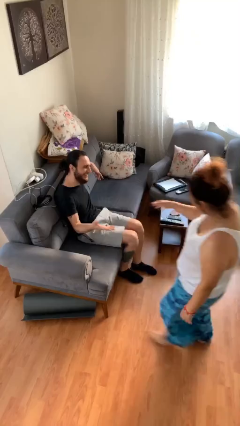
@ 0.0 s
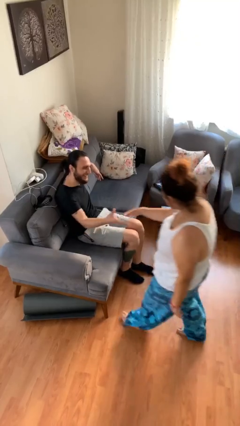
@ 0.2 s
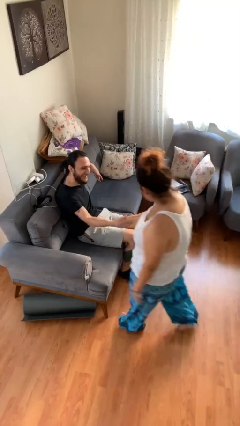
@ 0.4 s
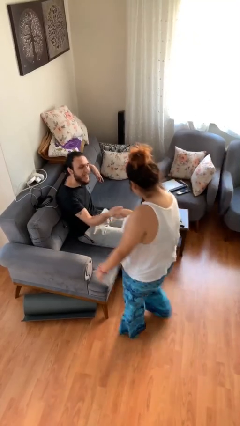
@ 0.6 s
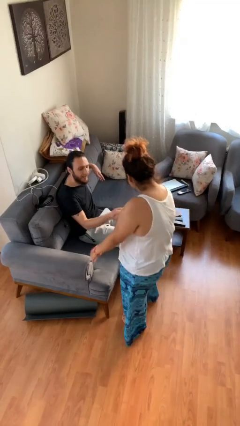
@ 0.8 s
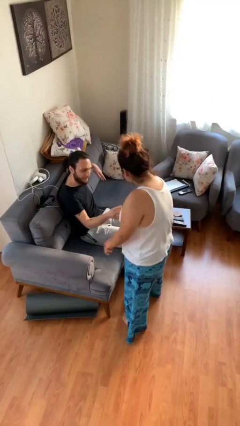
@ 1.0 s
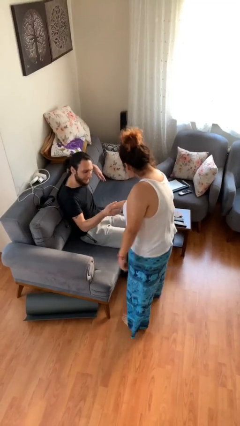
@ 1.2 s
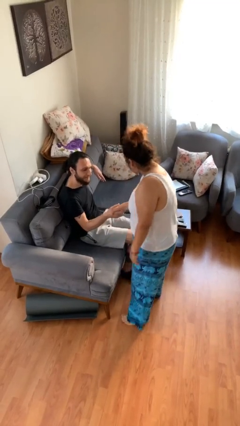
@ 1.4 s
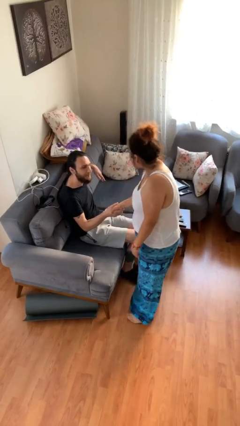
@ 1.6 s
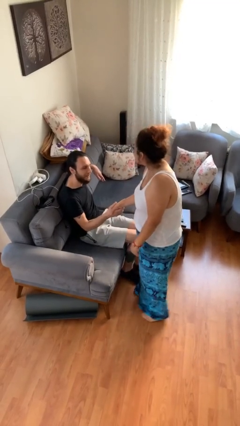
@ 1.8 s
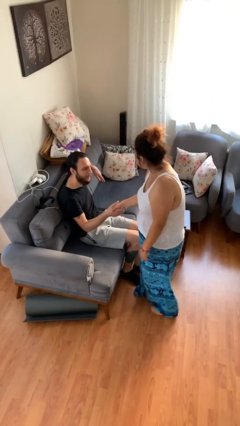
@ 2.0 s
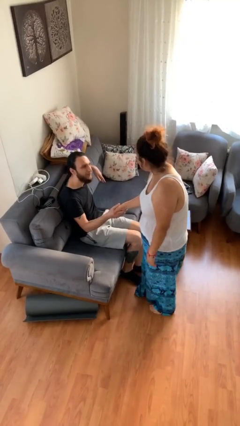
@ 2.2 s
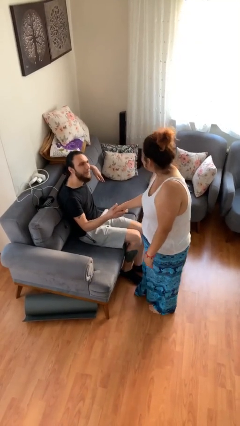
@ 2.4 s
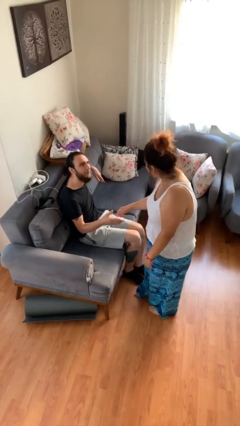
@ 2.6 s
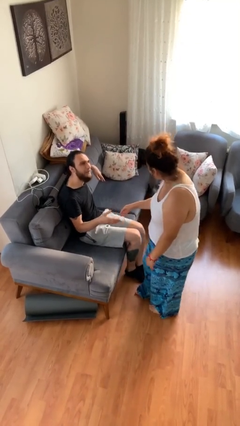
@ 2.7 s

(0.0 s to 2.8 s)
person shakes hand

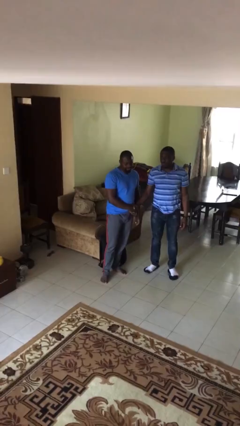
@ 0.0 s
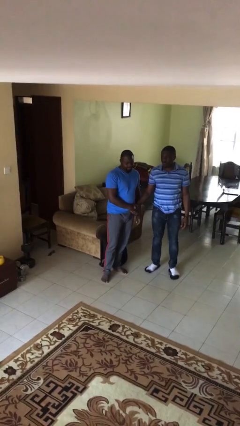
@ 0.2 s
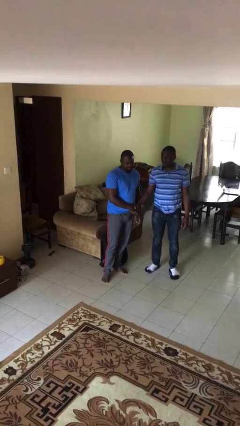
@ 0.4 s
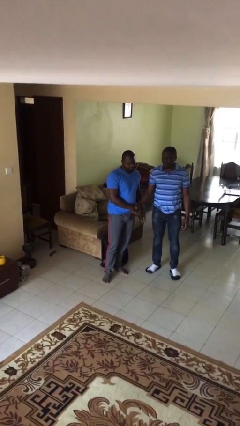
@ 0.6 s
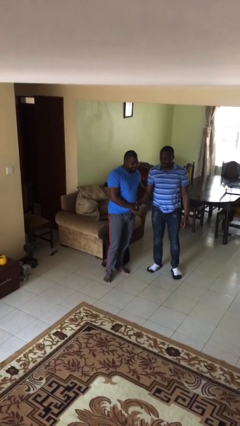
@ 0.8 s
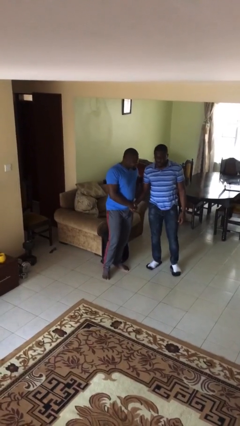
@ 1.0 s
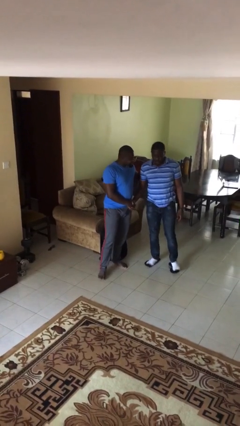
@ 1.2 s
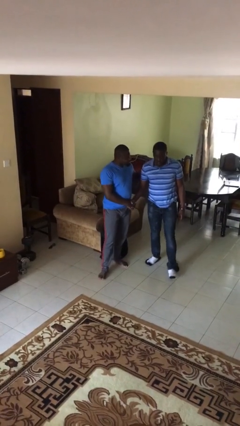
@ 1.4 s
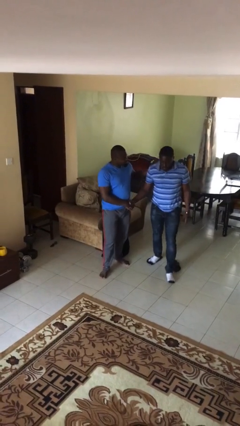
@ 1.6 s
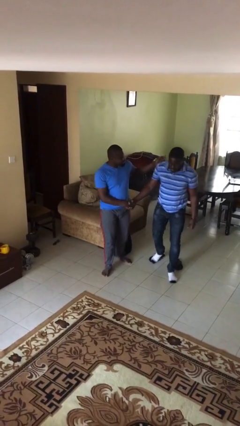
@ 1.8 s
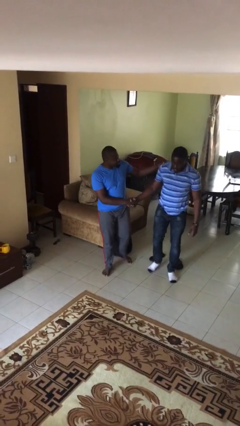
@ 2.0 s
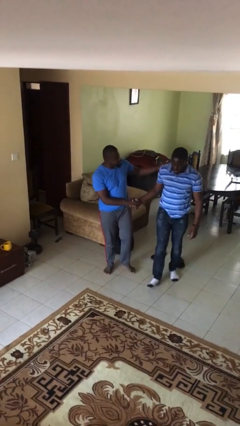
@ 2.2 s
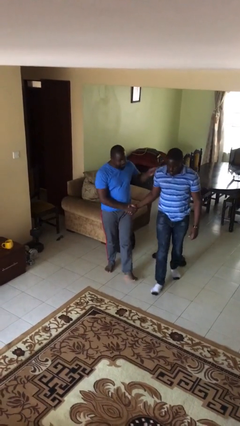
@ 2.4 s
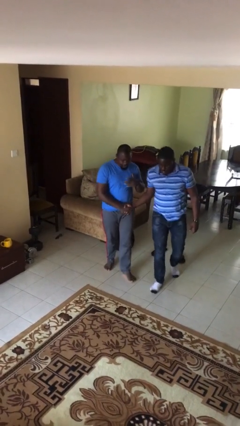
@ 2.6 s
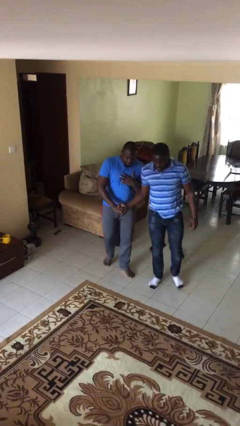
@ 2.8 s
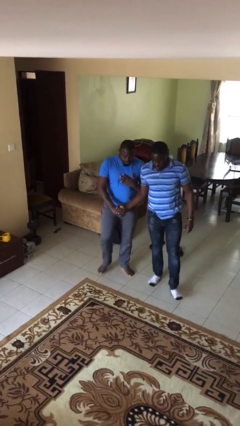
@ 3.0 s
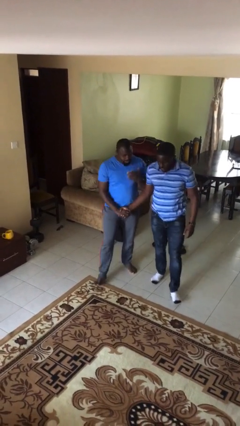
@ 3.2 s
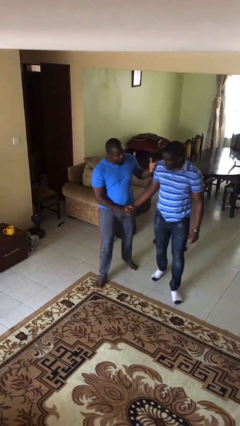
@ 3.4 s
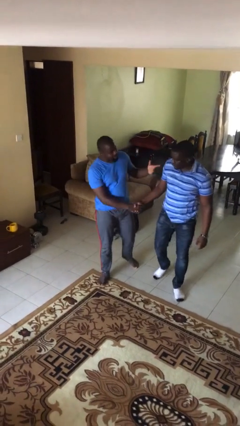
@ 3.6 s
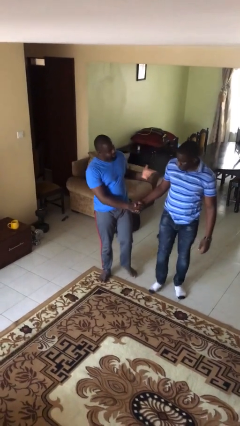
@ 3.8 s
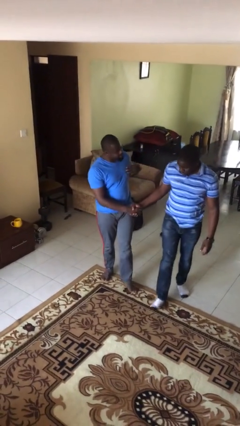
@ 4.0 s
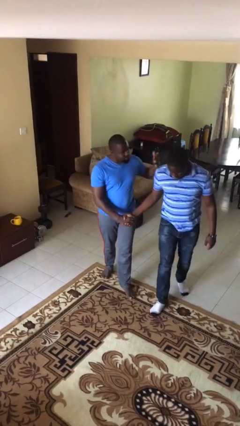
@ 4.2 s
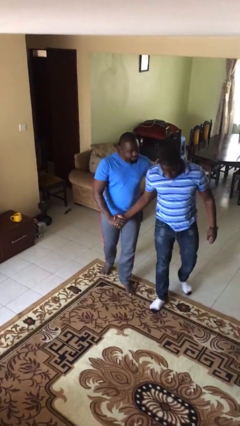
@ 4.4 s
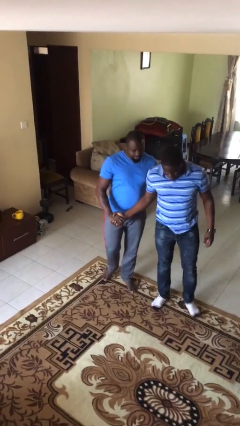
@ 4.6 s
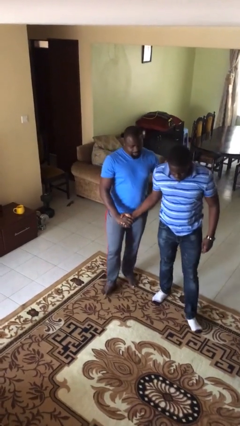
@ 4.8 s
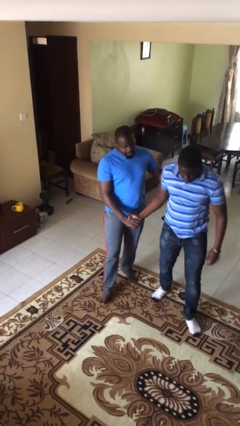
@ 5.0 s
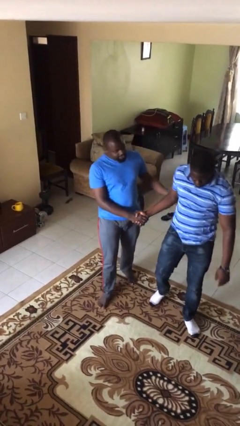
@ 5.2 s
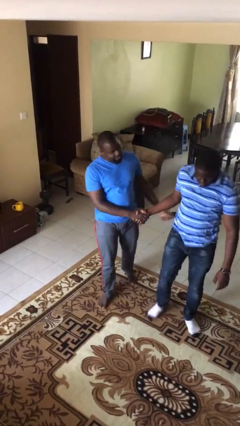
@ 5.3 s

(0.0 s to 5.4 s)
person holds hand

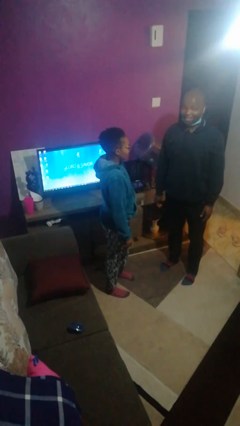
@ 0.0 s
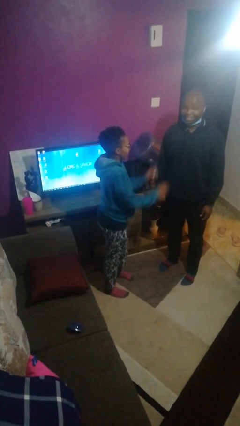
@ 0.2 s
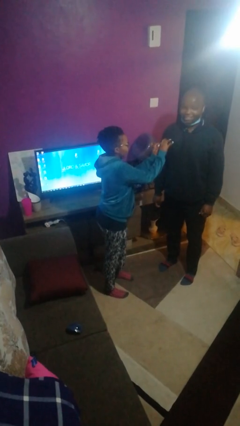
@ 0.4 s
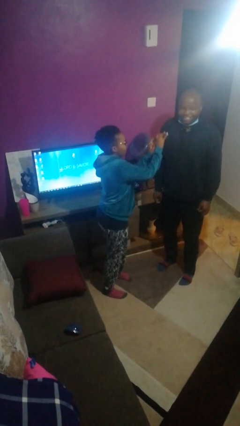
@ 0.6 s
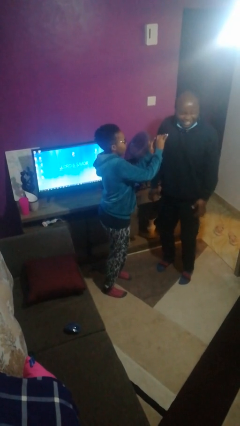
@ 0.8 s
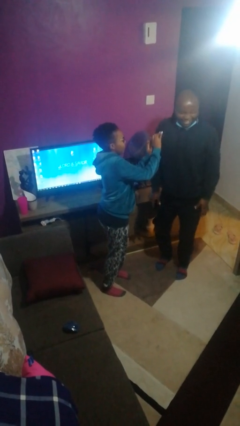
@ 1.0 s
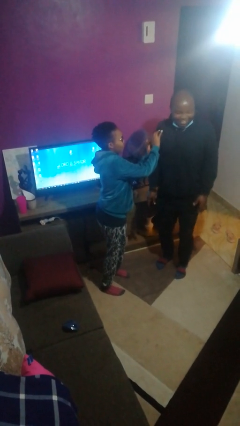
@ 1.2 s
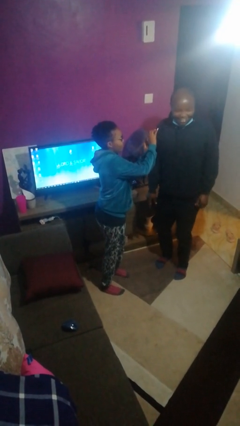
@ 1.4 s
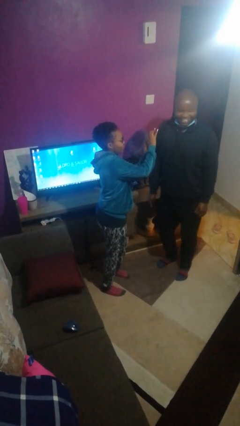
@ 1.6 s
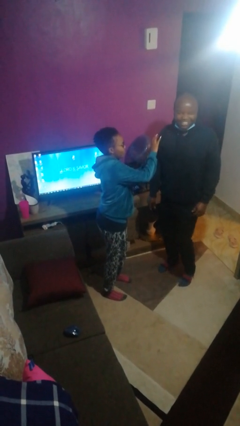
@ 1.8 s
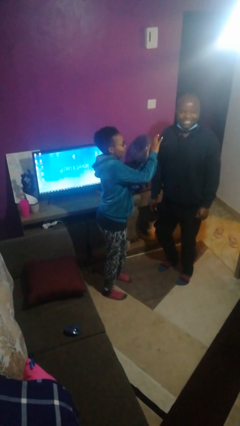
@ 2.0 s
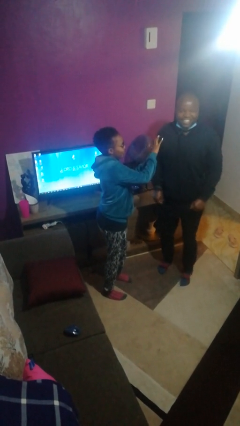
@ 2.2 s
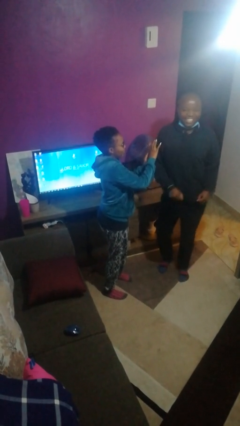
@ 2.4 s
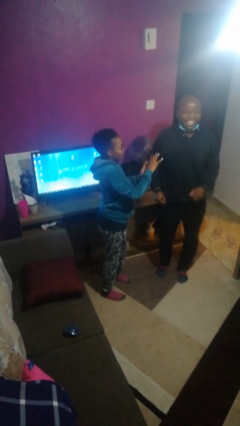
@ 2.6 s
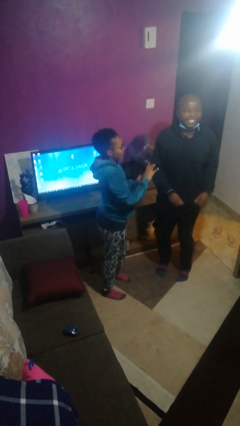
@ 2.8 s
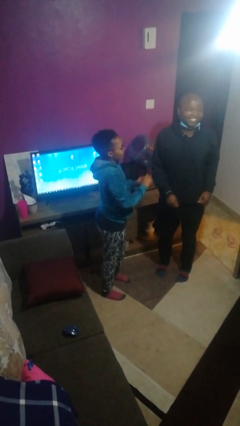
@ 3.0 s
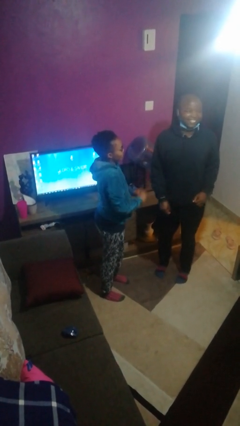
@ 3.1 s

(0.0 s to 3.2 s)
person tickles person

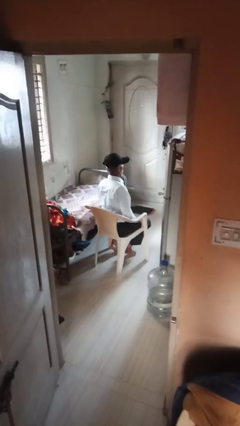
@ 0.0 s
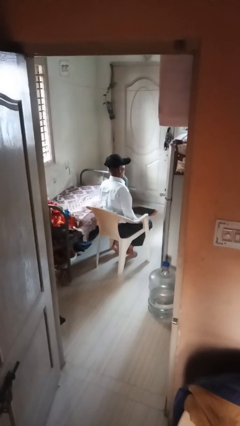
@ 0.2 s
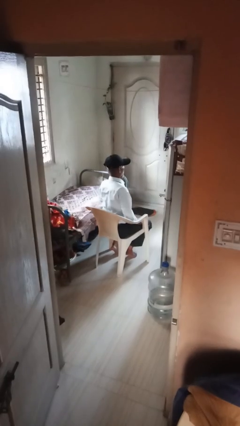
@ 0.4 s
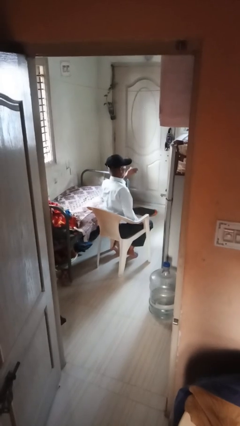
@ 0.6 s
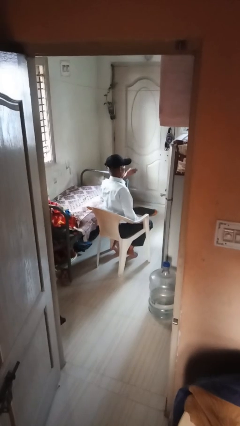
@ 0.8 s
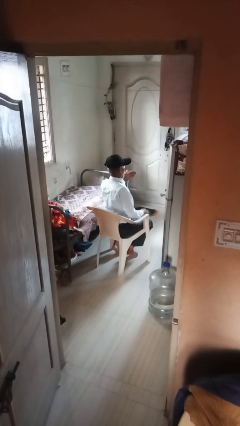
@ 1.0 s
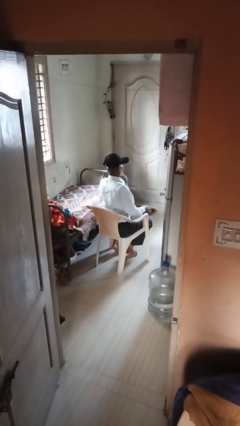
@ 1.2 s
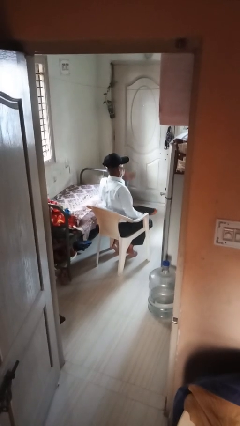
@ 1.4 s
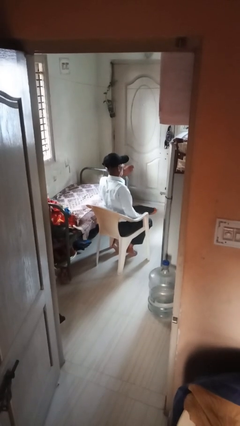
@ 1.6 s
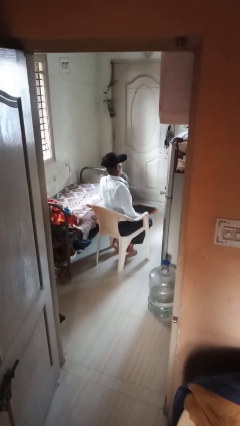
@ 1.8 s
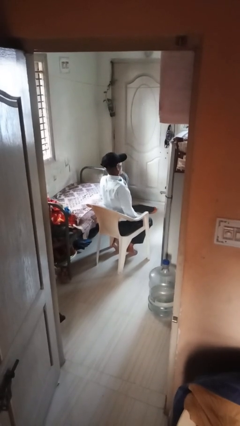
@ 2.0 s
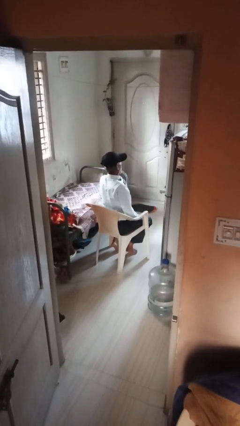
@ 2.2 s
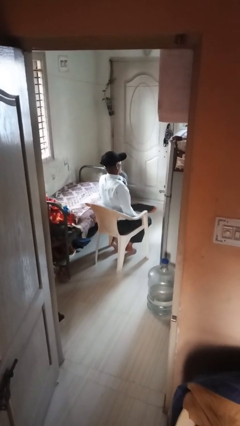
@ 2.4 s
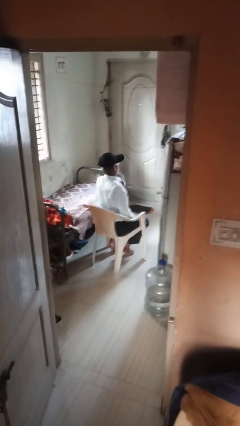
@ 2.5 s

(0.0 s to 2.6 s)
person drums on chest

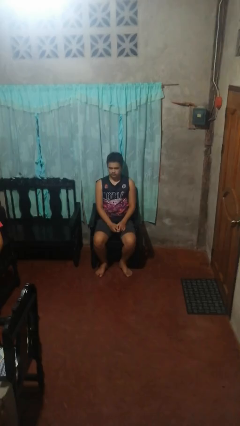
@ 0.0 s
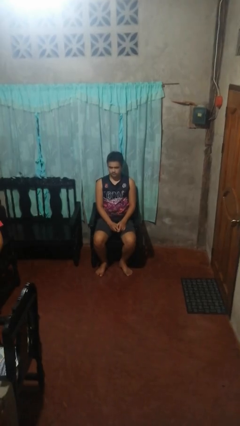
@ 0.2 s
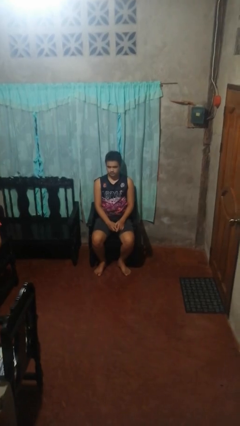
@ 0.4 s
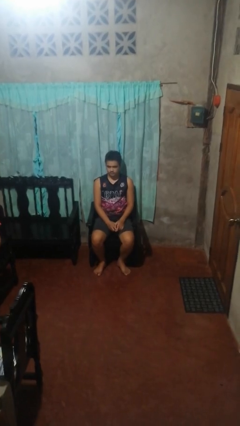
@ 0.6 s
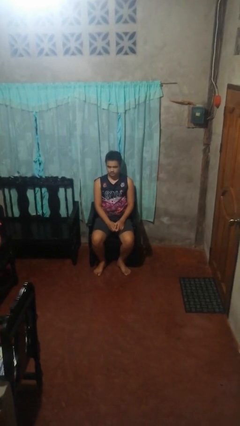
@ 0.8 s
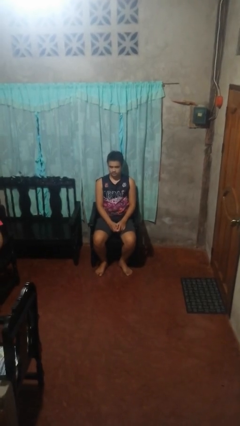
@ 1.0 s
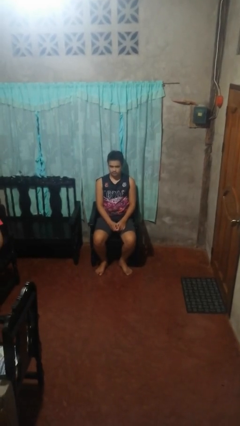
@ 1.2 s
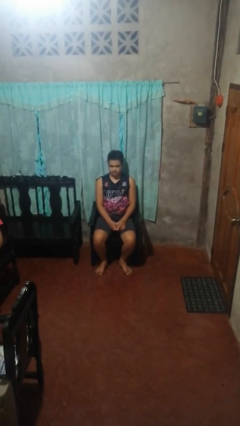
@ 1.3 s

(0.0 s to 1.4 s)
person holds object above head

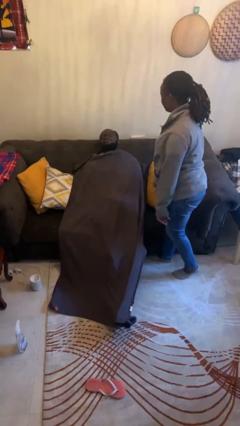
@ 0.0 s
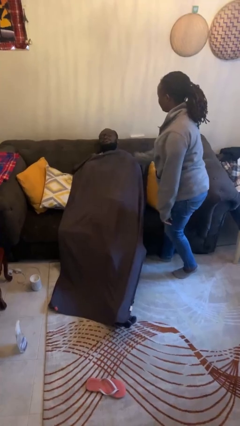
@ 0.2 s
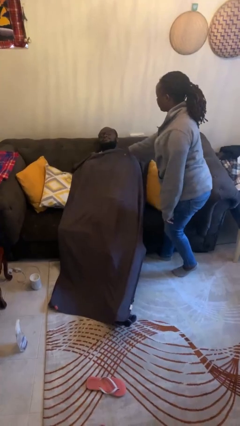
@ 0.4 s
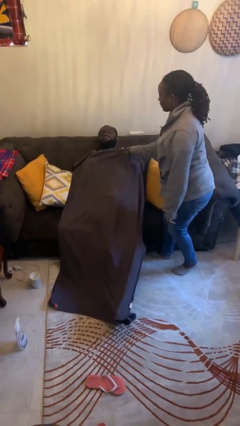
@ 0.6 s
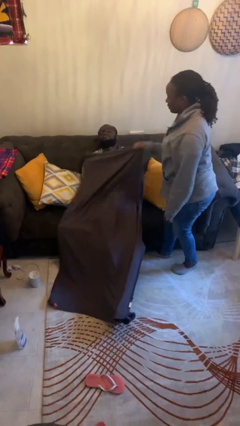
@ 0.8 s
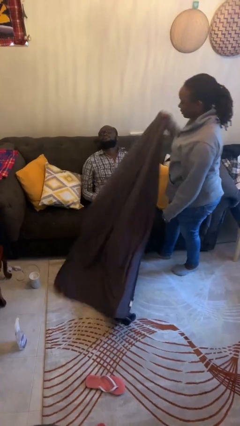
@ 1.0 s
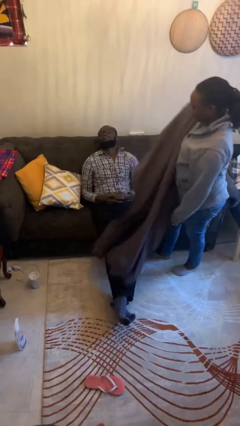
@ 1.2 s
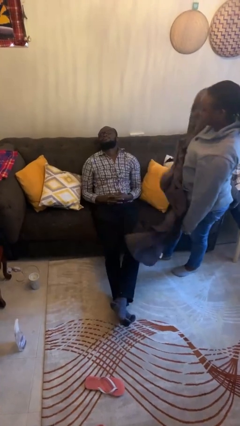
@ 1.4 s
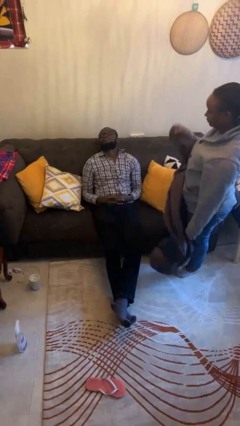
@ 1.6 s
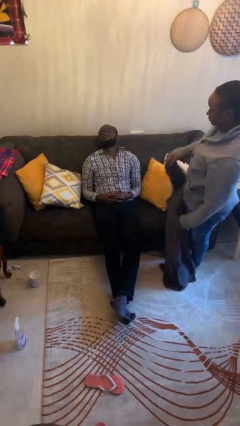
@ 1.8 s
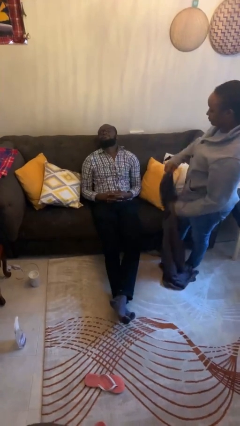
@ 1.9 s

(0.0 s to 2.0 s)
person uncovers friend with blanket
